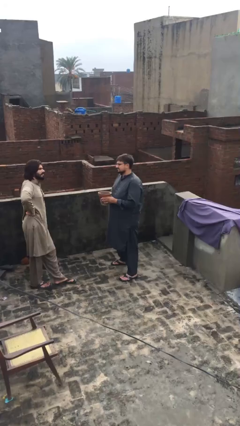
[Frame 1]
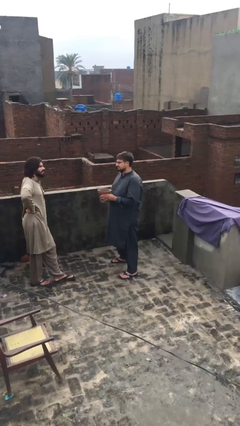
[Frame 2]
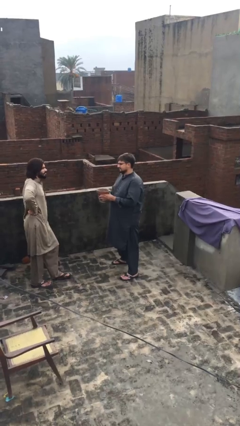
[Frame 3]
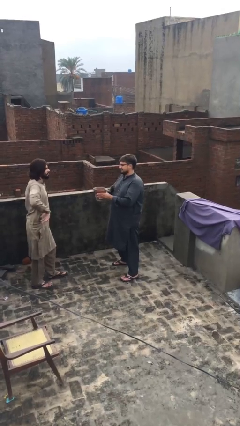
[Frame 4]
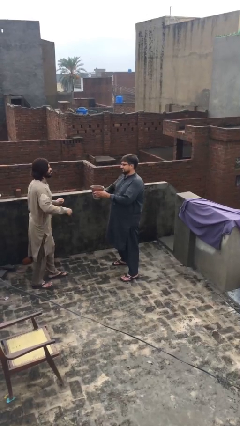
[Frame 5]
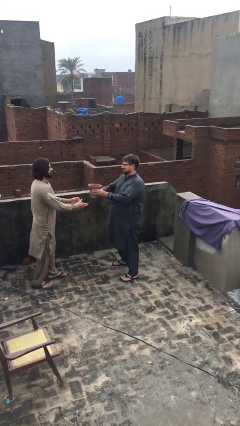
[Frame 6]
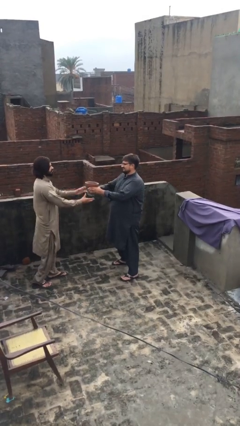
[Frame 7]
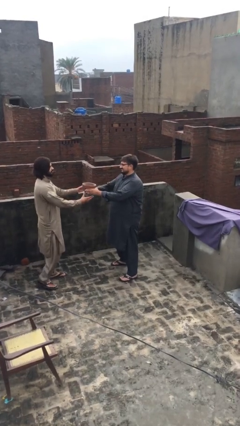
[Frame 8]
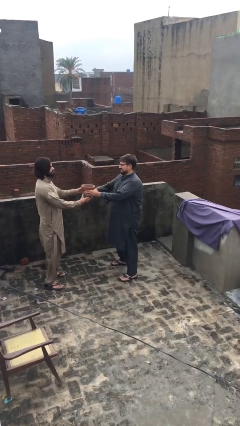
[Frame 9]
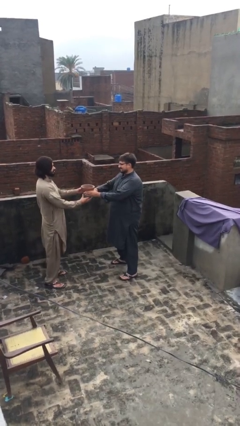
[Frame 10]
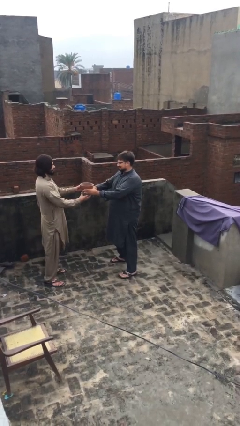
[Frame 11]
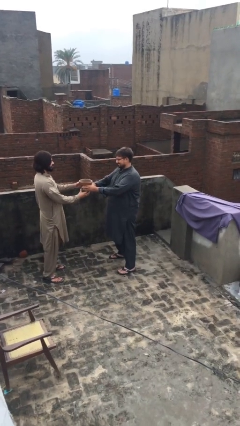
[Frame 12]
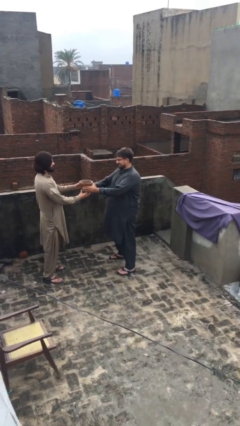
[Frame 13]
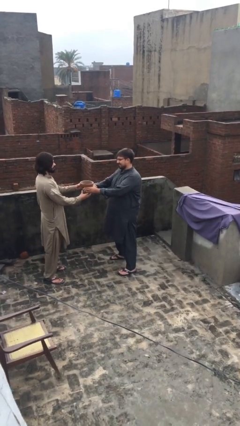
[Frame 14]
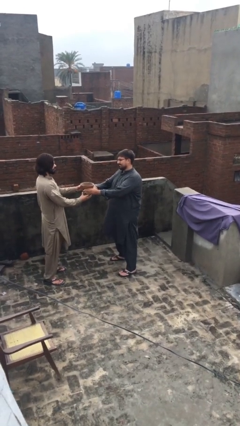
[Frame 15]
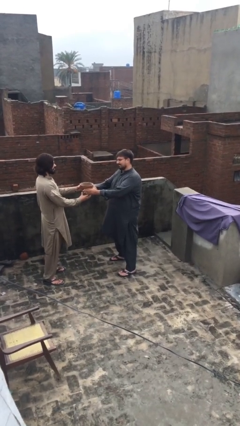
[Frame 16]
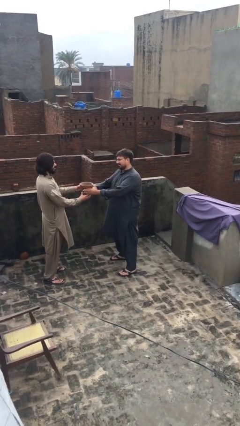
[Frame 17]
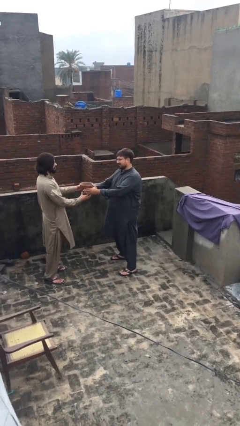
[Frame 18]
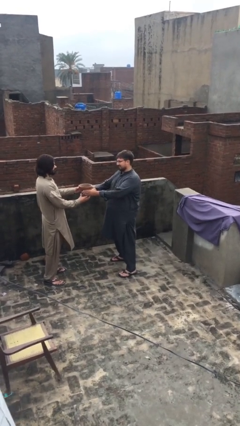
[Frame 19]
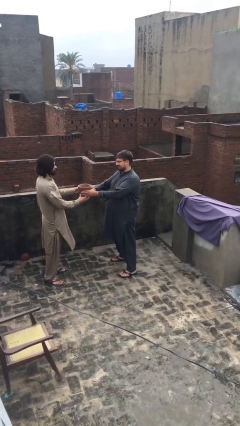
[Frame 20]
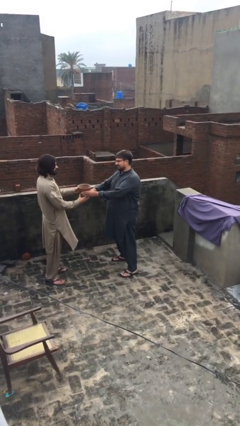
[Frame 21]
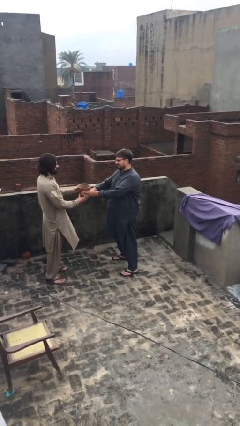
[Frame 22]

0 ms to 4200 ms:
person transfers object to person

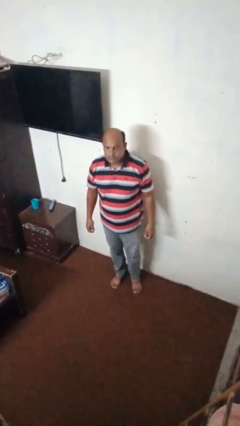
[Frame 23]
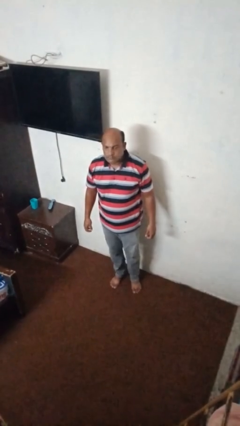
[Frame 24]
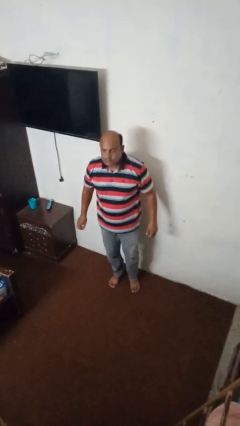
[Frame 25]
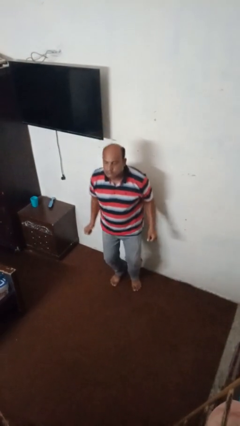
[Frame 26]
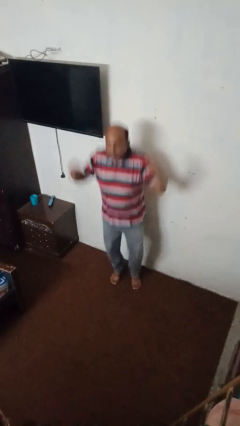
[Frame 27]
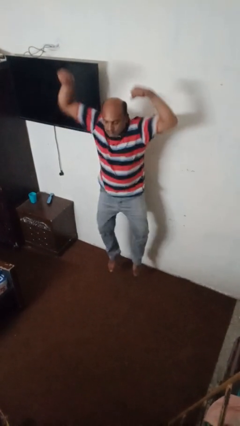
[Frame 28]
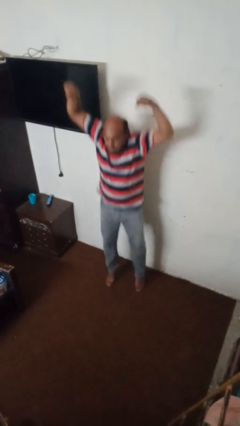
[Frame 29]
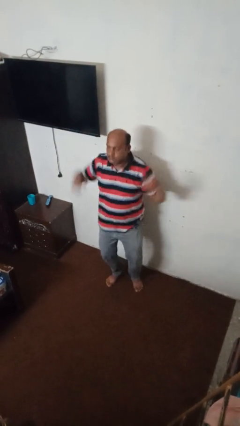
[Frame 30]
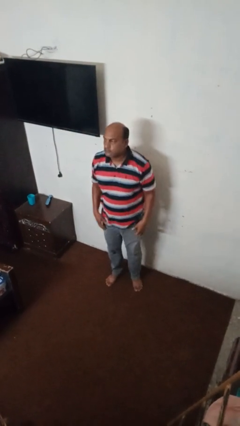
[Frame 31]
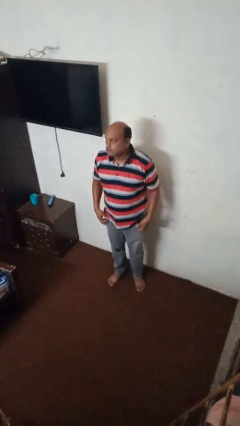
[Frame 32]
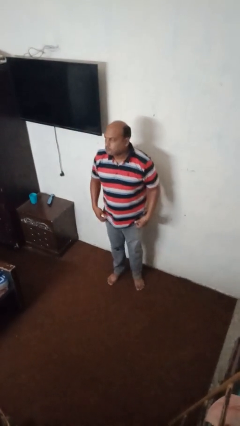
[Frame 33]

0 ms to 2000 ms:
person jumps

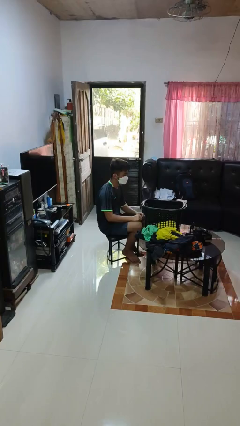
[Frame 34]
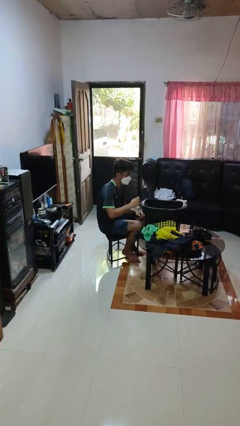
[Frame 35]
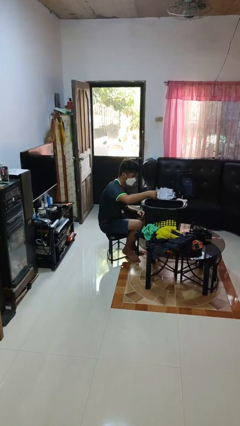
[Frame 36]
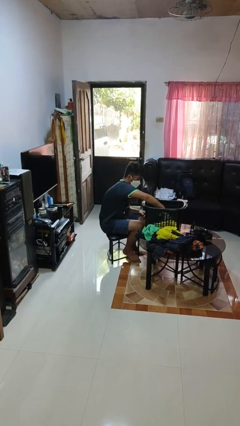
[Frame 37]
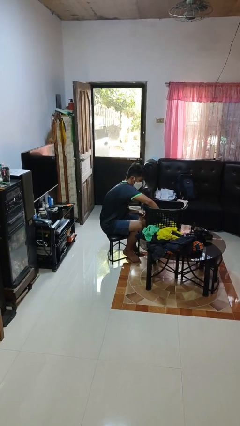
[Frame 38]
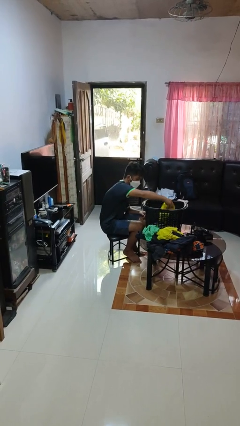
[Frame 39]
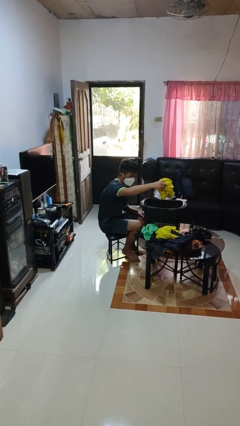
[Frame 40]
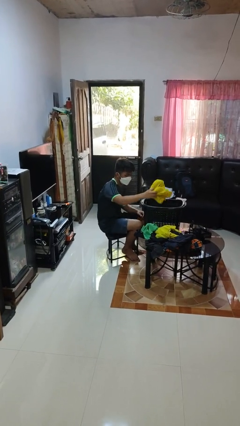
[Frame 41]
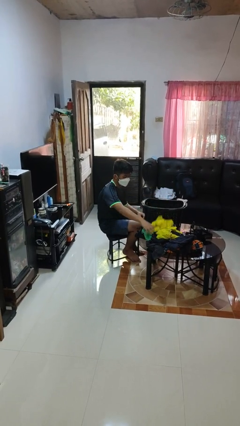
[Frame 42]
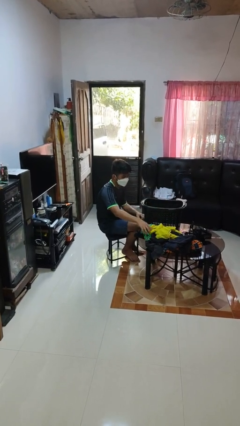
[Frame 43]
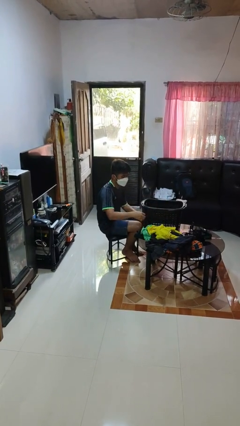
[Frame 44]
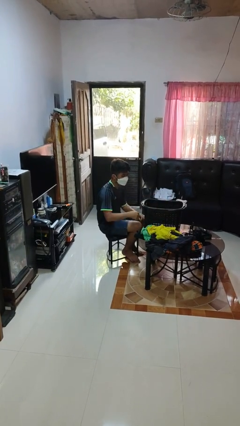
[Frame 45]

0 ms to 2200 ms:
person takes object from basket

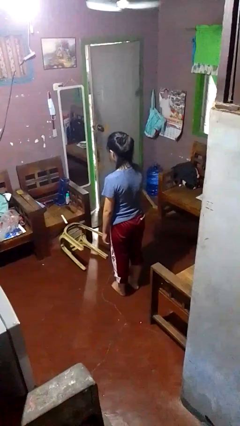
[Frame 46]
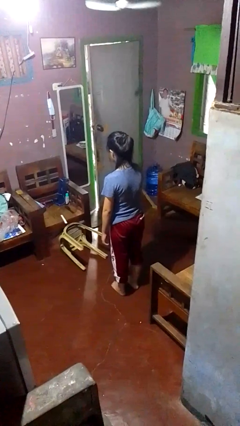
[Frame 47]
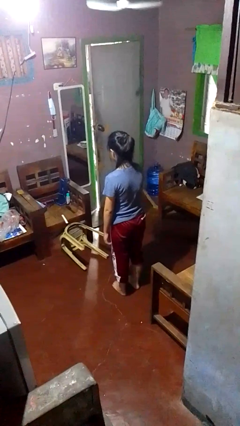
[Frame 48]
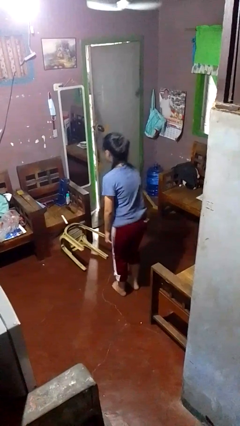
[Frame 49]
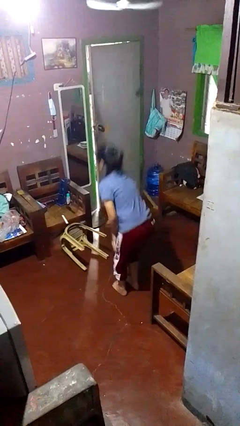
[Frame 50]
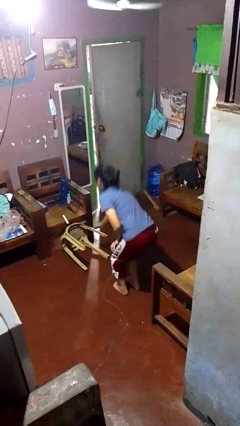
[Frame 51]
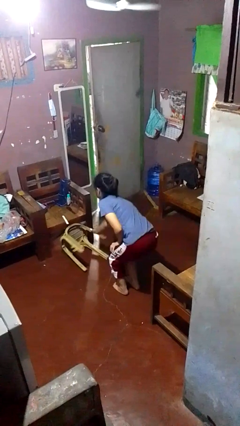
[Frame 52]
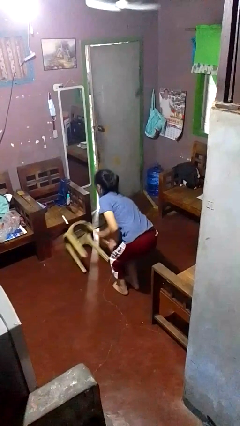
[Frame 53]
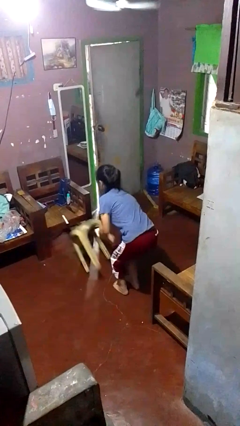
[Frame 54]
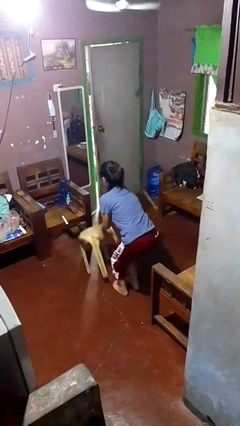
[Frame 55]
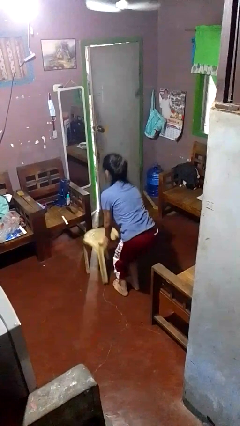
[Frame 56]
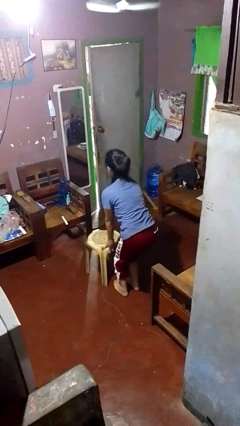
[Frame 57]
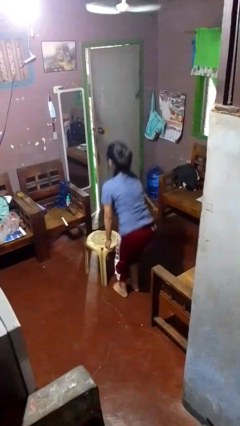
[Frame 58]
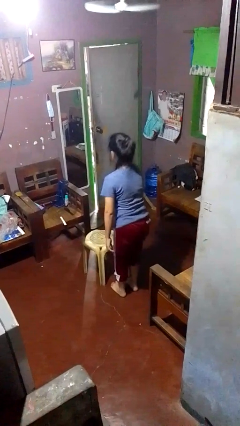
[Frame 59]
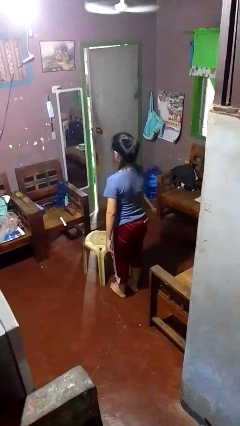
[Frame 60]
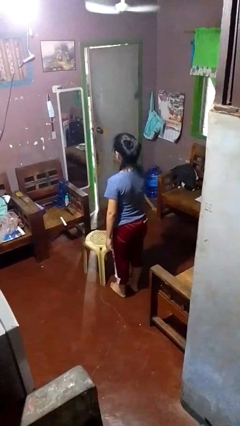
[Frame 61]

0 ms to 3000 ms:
person sets upright furniture

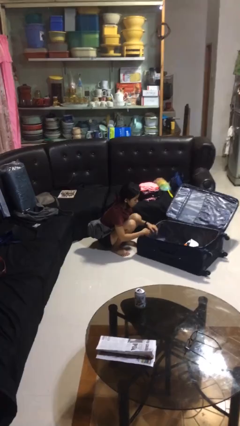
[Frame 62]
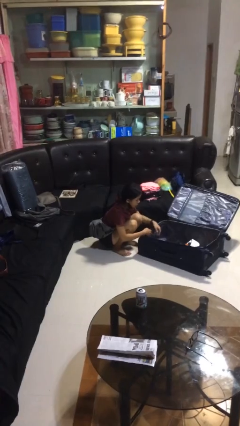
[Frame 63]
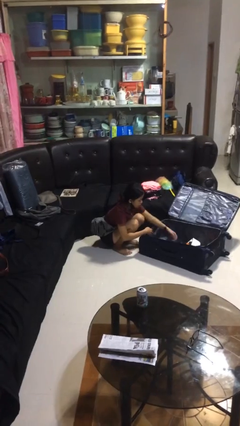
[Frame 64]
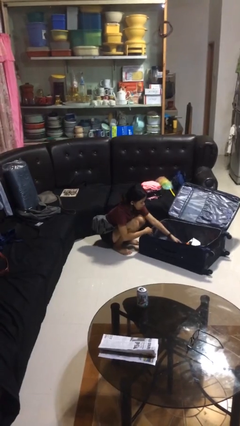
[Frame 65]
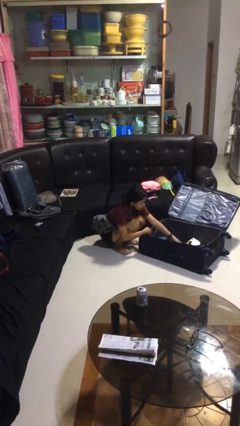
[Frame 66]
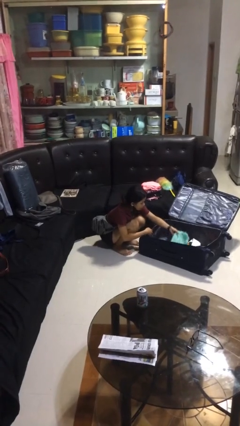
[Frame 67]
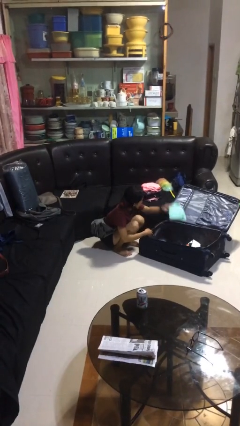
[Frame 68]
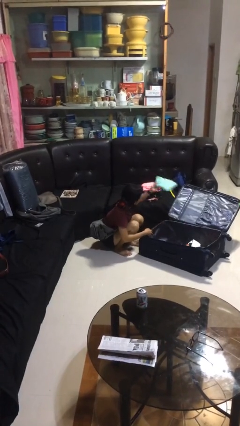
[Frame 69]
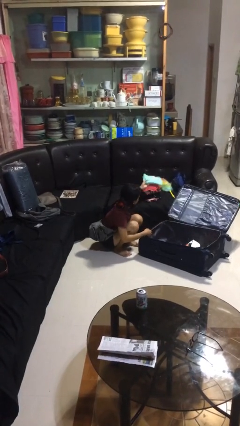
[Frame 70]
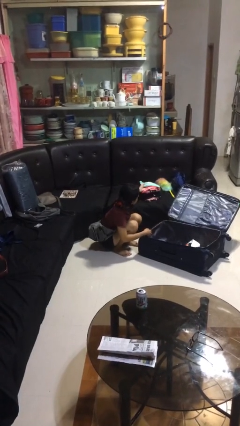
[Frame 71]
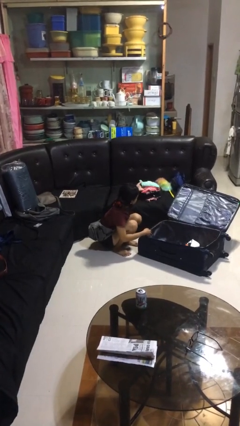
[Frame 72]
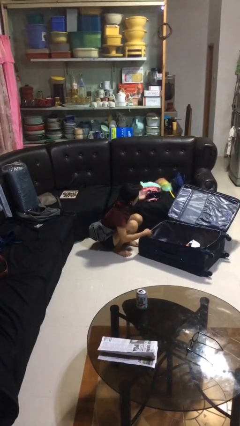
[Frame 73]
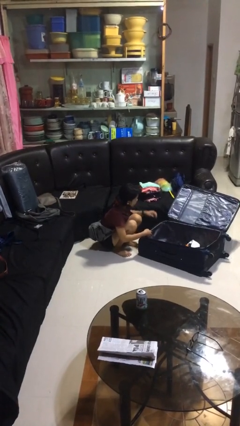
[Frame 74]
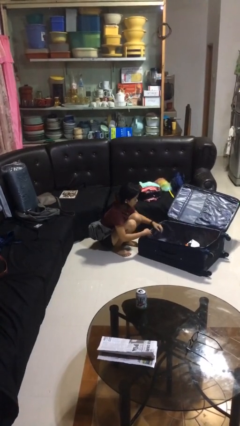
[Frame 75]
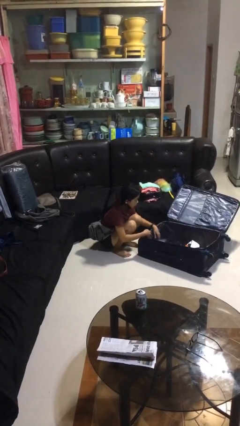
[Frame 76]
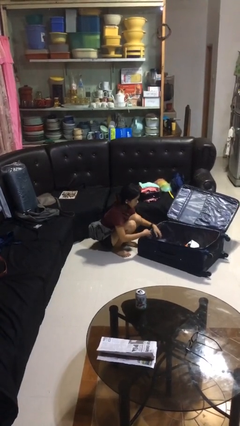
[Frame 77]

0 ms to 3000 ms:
person loads clothes into suitcase

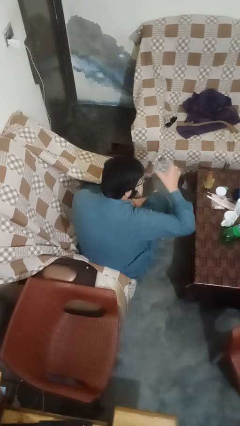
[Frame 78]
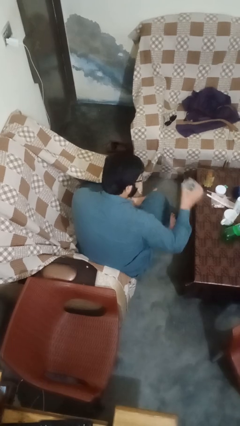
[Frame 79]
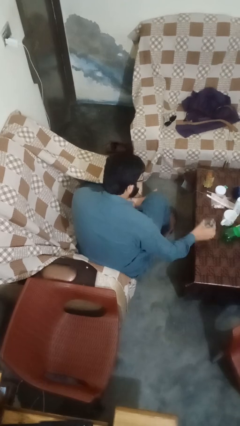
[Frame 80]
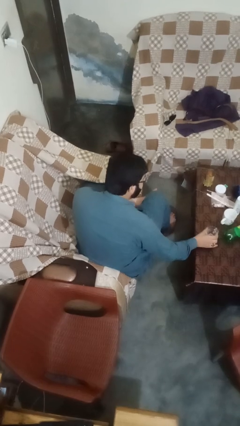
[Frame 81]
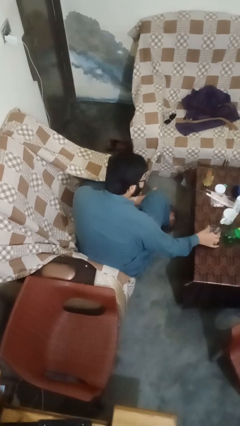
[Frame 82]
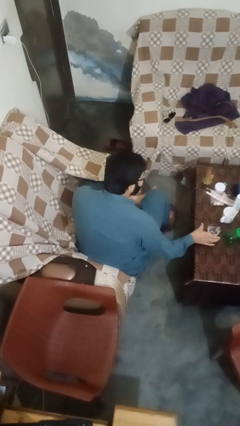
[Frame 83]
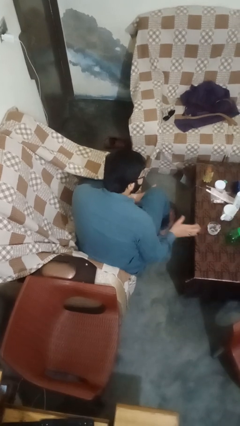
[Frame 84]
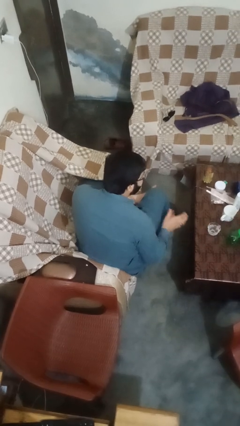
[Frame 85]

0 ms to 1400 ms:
person puts down object on table

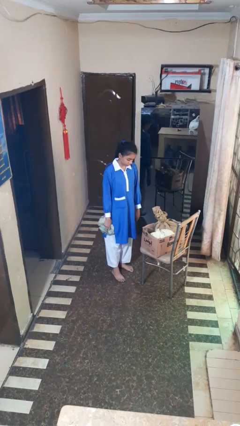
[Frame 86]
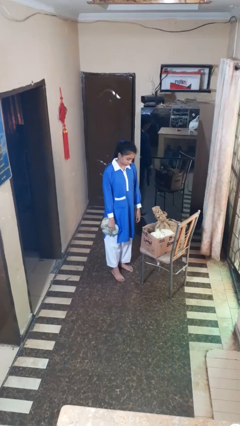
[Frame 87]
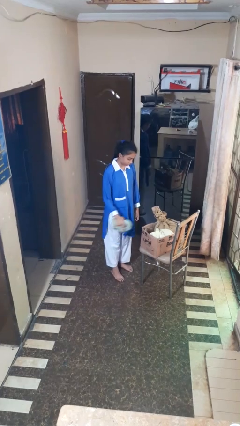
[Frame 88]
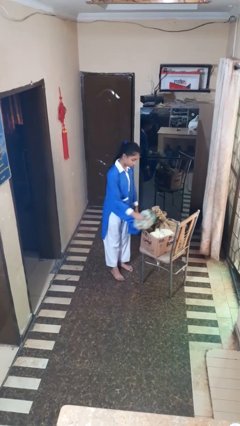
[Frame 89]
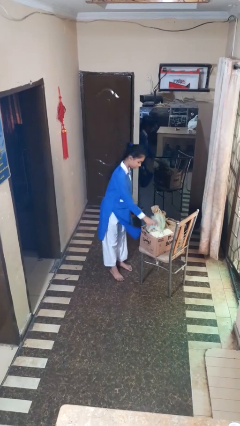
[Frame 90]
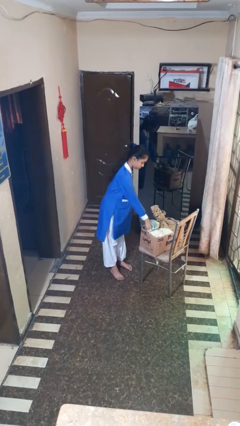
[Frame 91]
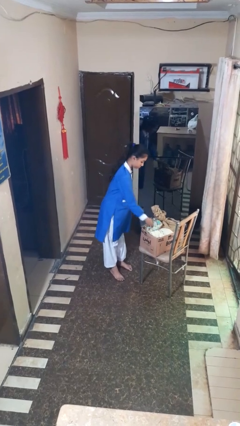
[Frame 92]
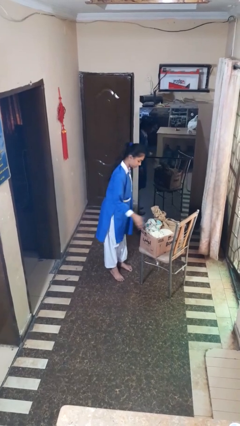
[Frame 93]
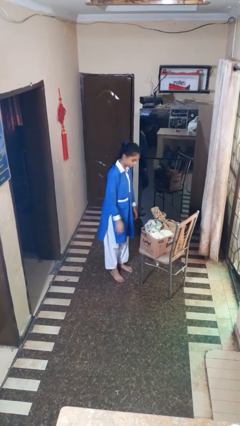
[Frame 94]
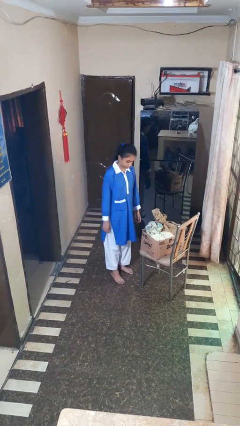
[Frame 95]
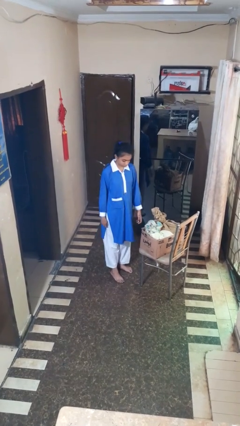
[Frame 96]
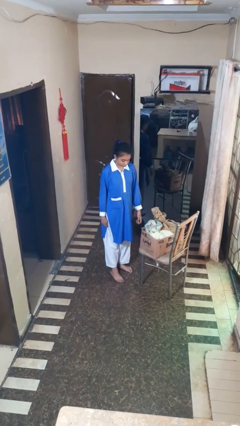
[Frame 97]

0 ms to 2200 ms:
person puts object into box
